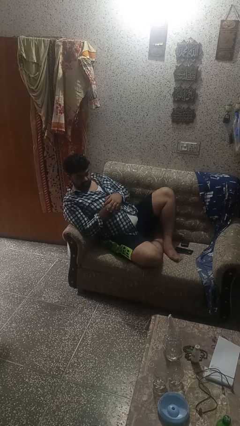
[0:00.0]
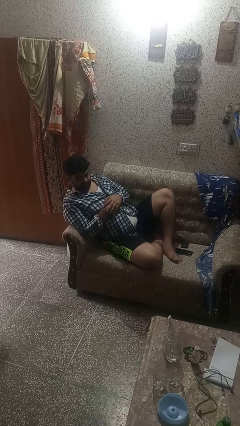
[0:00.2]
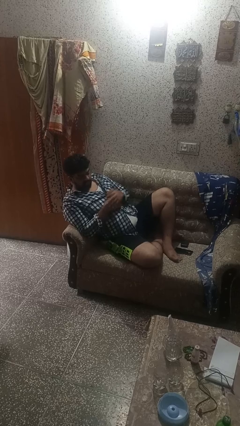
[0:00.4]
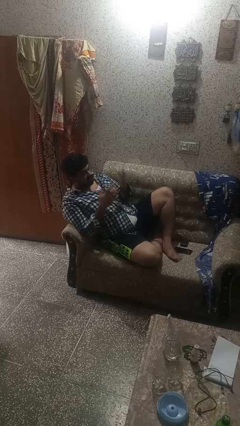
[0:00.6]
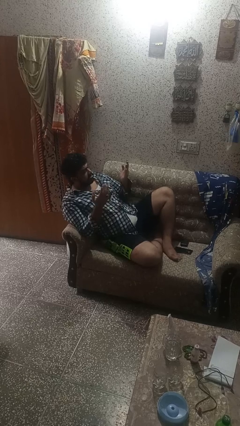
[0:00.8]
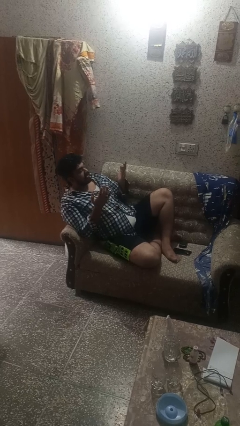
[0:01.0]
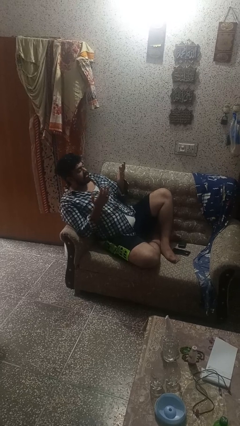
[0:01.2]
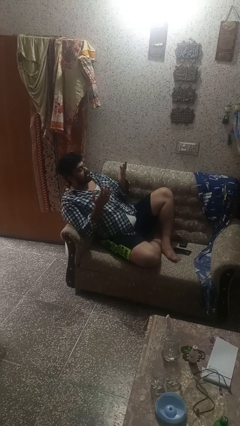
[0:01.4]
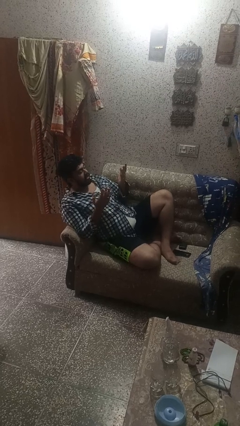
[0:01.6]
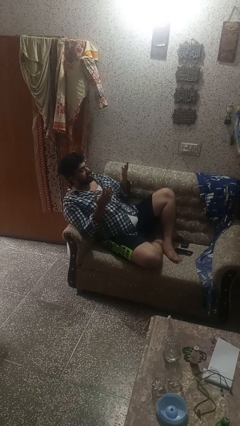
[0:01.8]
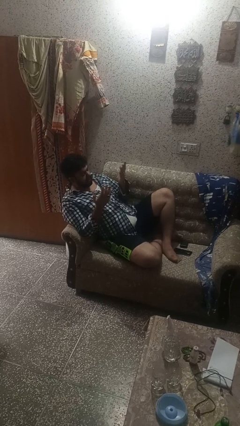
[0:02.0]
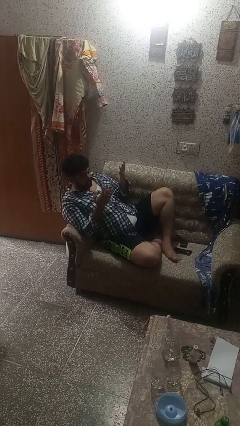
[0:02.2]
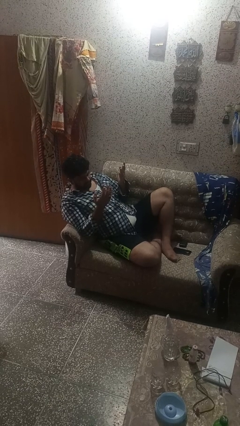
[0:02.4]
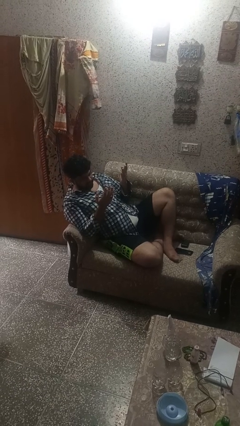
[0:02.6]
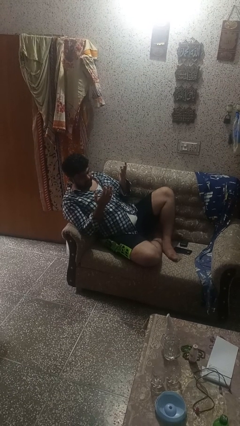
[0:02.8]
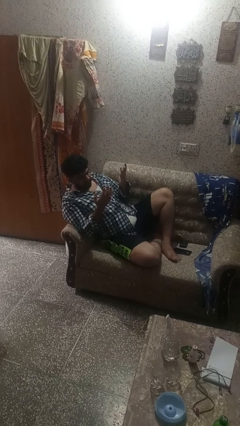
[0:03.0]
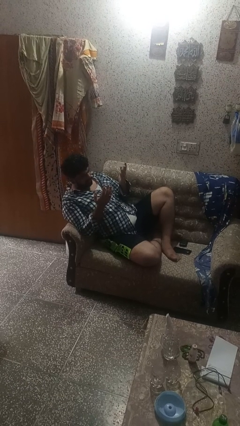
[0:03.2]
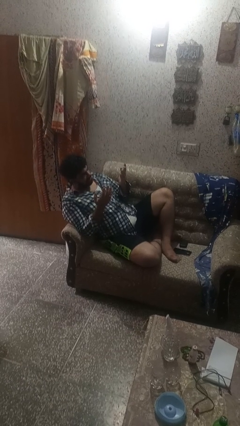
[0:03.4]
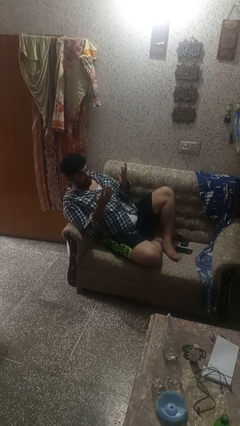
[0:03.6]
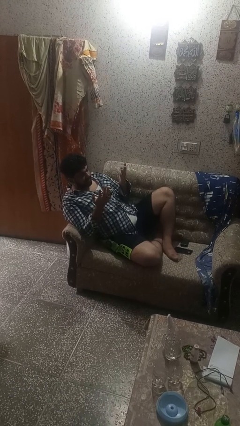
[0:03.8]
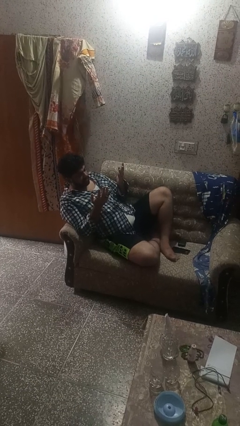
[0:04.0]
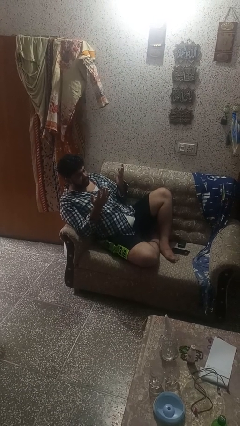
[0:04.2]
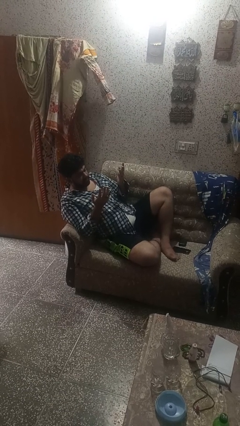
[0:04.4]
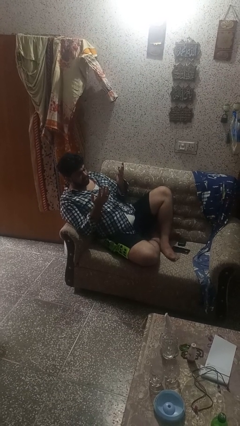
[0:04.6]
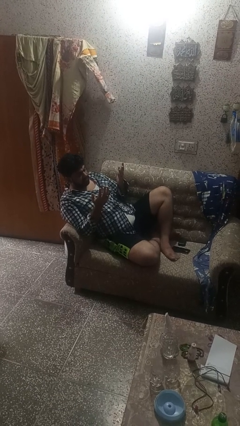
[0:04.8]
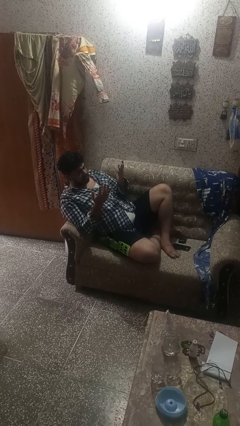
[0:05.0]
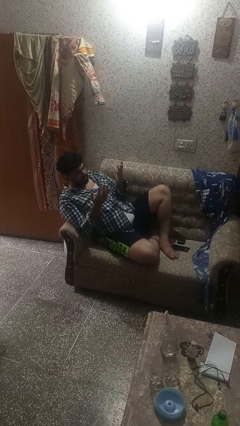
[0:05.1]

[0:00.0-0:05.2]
person prays

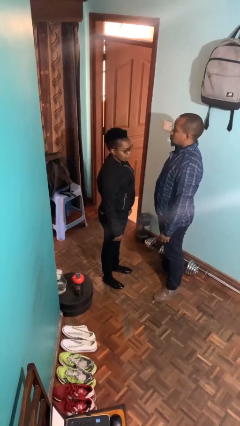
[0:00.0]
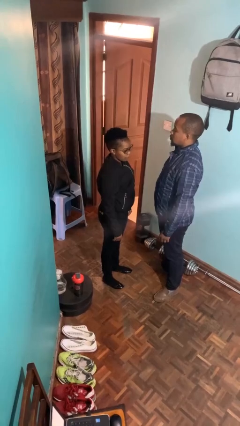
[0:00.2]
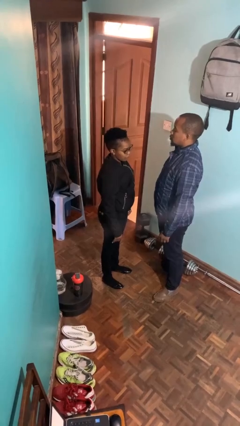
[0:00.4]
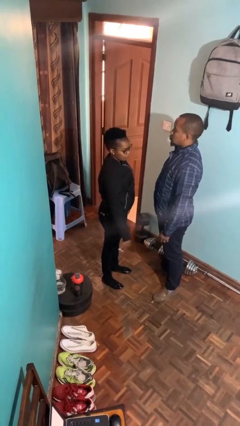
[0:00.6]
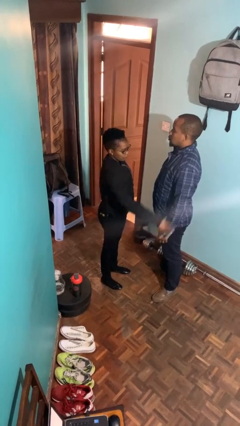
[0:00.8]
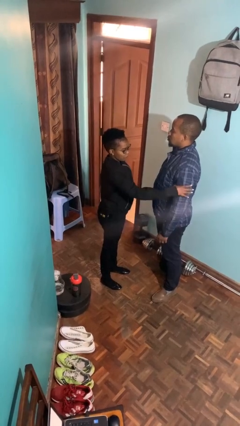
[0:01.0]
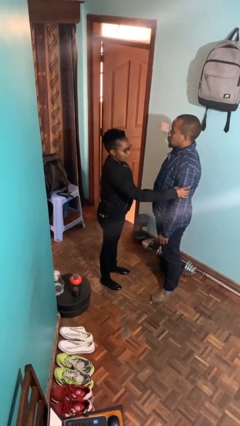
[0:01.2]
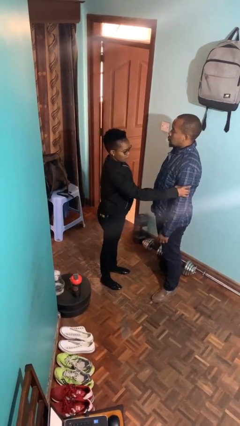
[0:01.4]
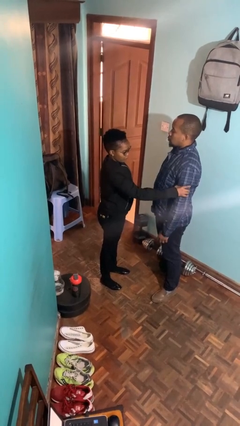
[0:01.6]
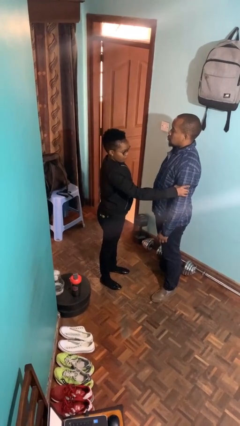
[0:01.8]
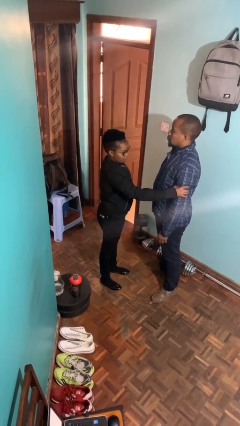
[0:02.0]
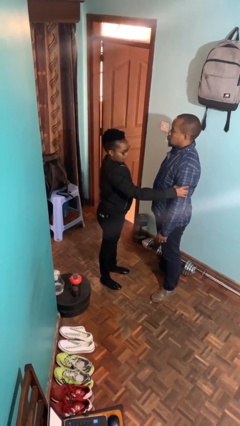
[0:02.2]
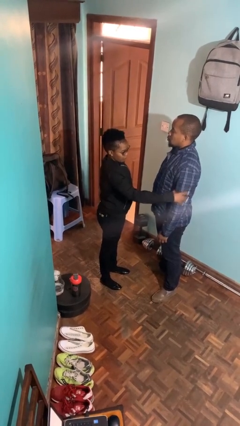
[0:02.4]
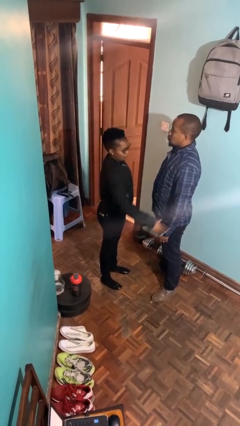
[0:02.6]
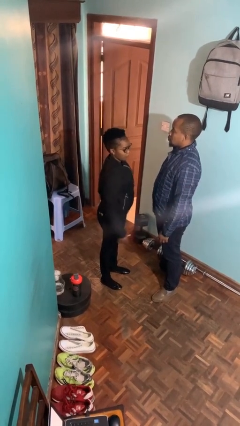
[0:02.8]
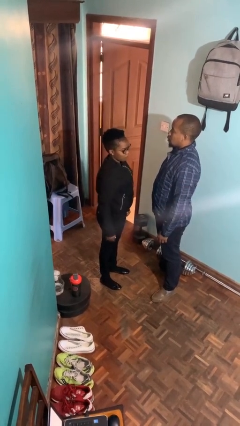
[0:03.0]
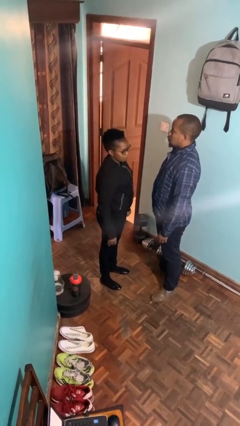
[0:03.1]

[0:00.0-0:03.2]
person grabs person by bicep

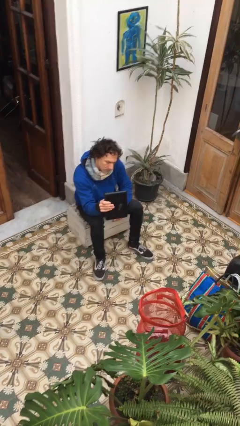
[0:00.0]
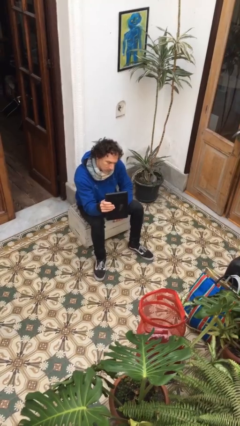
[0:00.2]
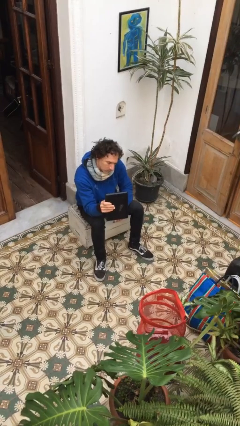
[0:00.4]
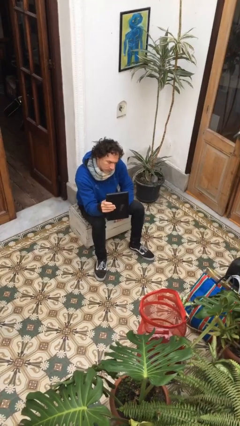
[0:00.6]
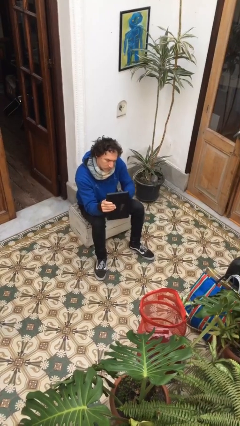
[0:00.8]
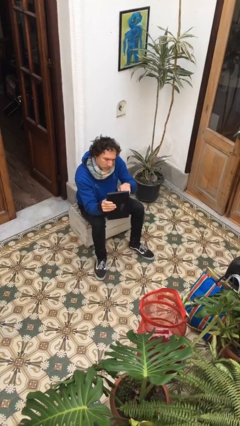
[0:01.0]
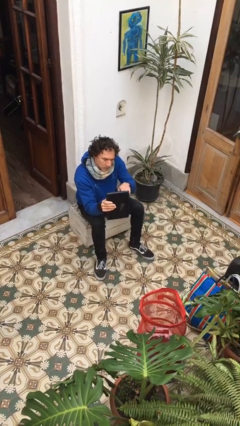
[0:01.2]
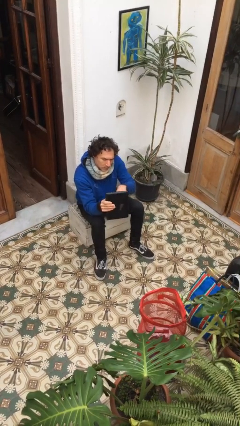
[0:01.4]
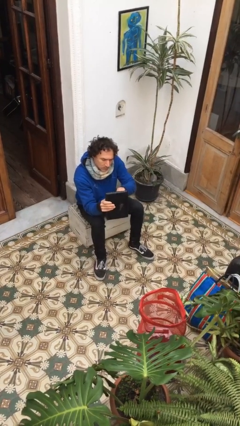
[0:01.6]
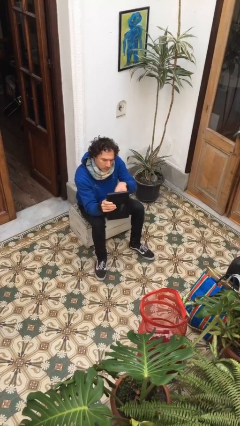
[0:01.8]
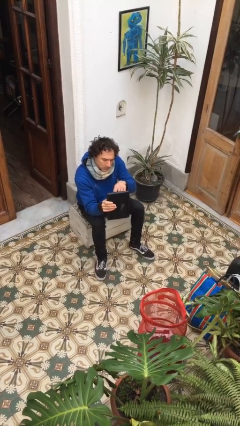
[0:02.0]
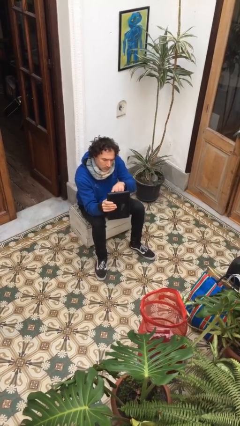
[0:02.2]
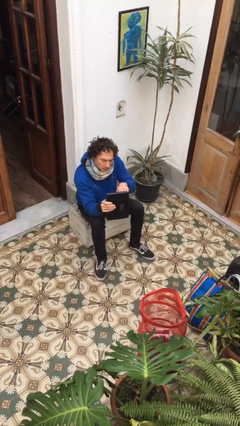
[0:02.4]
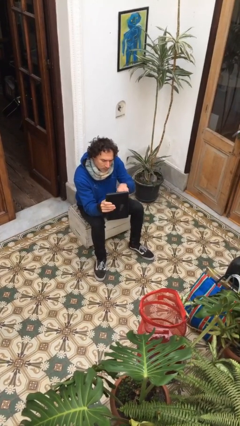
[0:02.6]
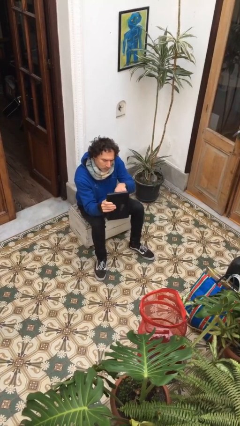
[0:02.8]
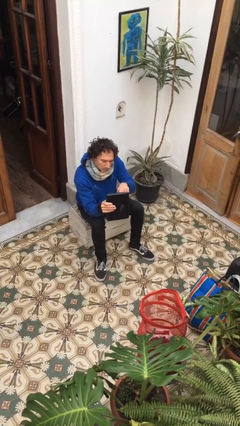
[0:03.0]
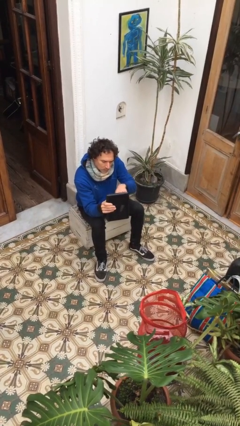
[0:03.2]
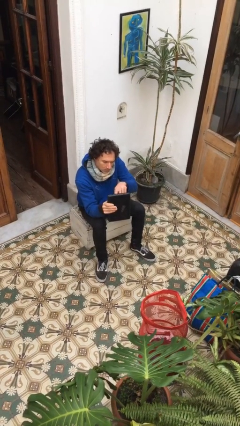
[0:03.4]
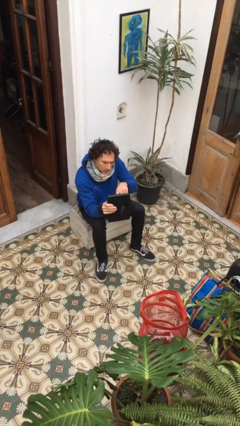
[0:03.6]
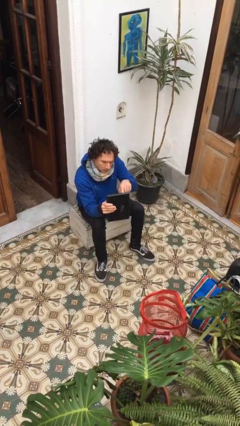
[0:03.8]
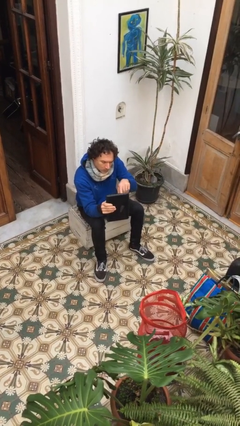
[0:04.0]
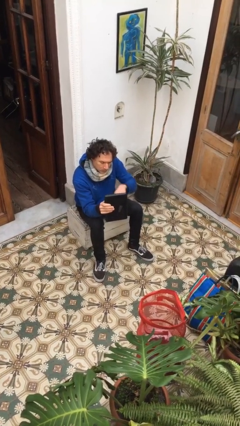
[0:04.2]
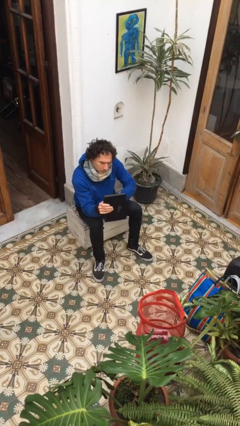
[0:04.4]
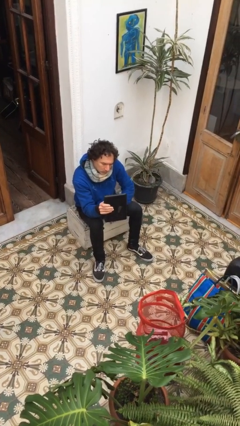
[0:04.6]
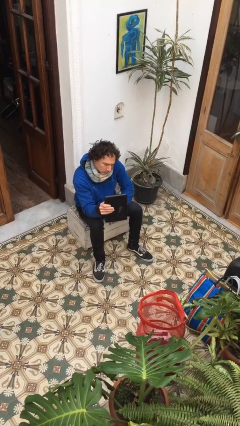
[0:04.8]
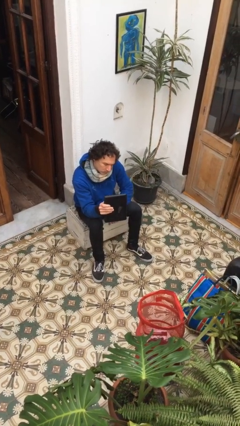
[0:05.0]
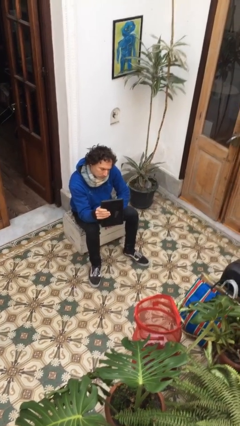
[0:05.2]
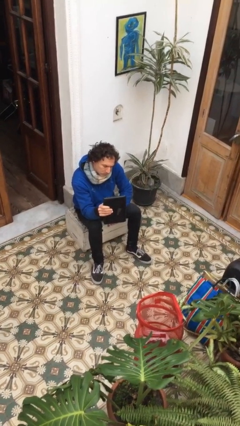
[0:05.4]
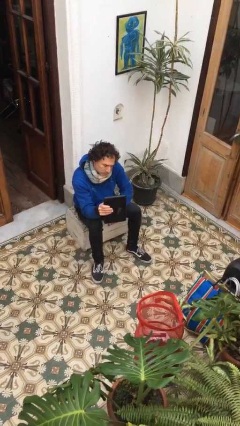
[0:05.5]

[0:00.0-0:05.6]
person interacts with tablet

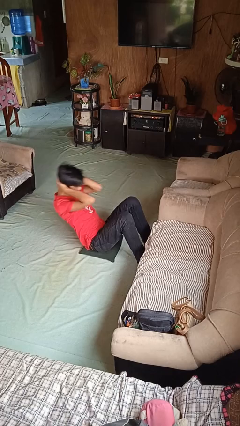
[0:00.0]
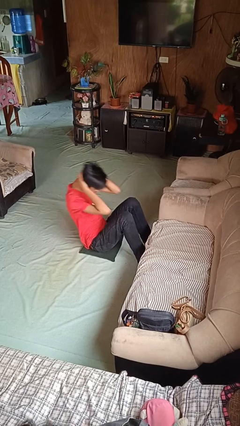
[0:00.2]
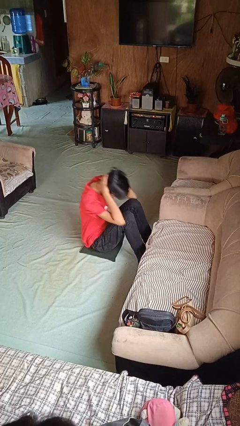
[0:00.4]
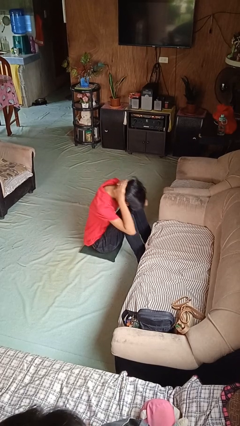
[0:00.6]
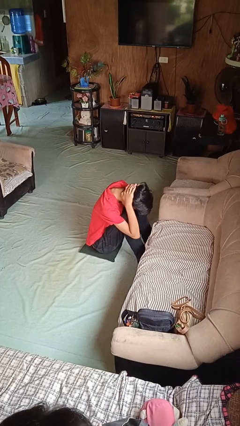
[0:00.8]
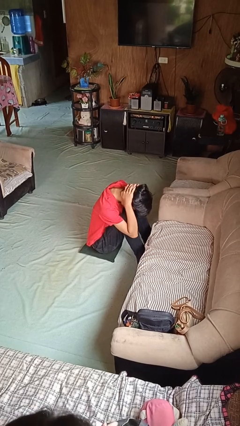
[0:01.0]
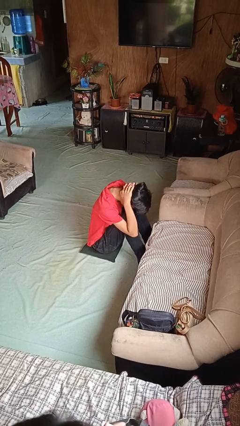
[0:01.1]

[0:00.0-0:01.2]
person exercises with situp

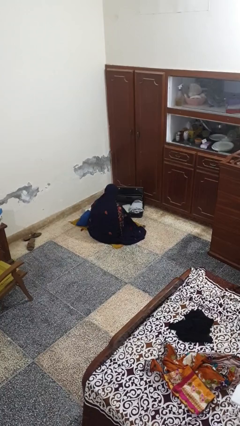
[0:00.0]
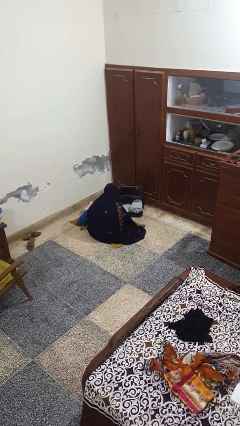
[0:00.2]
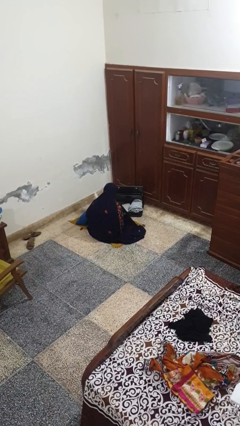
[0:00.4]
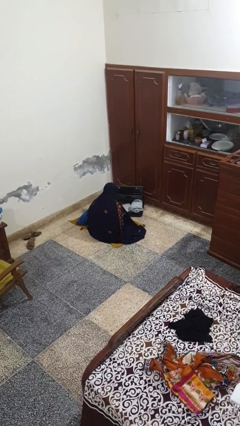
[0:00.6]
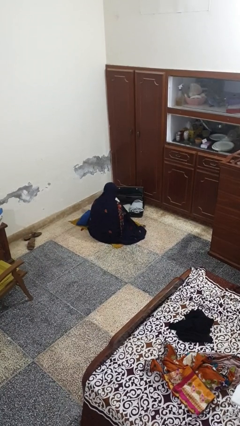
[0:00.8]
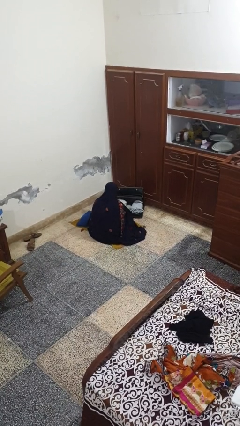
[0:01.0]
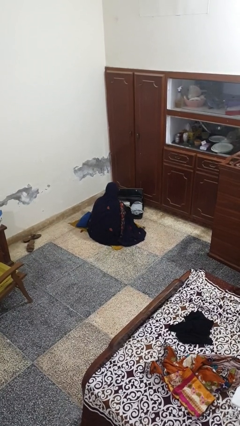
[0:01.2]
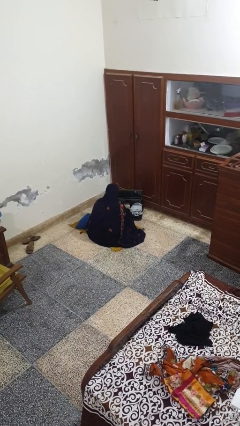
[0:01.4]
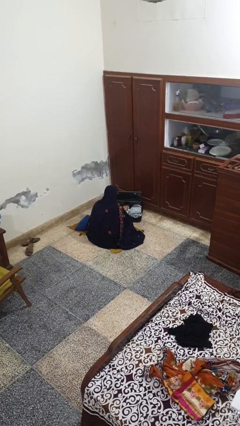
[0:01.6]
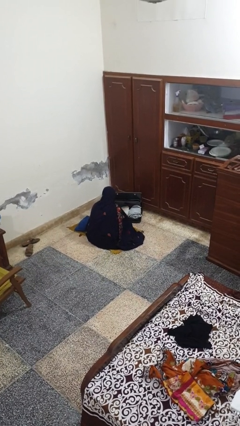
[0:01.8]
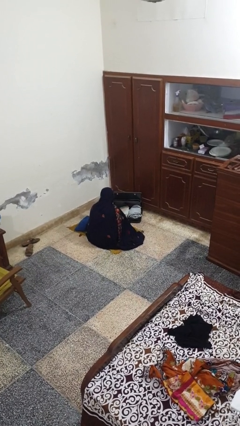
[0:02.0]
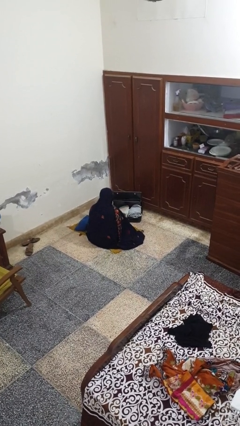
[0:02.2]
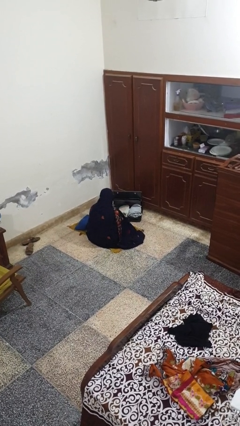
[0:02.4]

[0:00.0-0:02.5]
person loads clothes into suitcase
